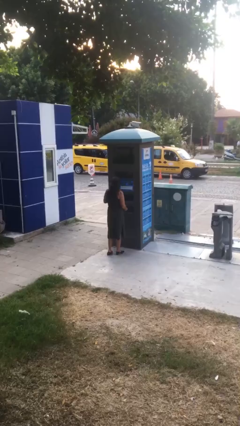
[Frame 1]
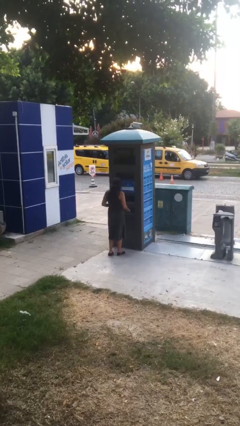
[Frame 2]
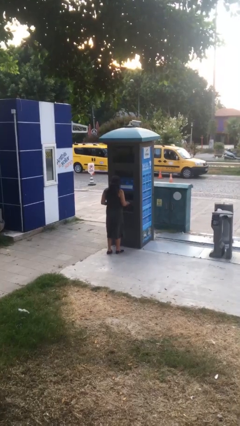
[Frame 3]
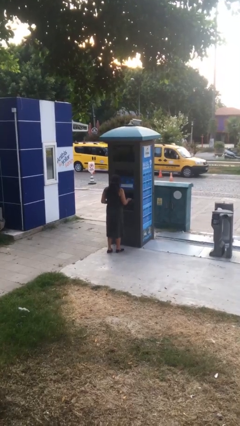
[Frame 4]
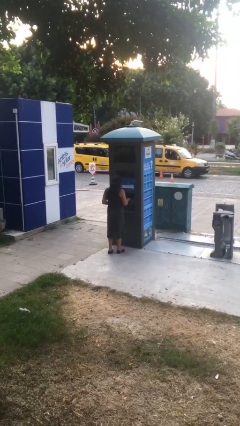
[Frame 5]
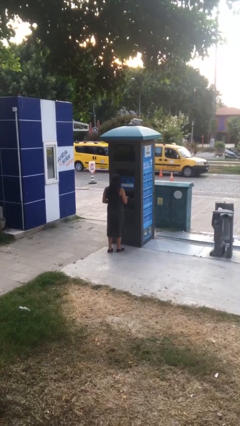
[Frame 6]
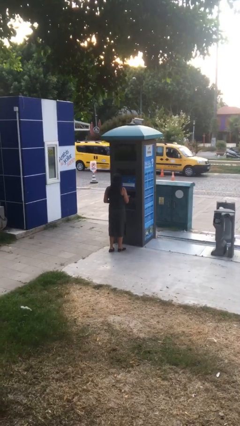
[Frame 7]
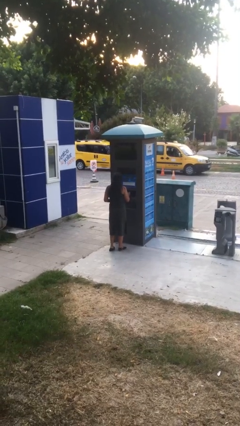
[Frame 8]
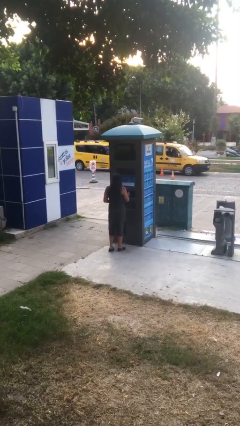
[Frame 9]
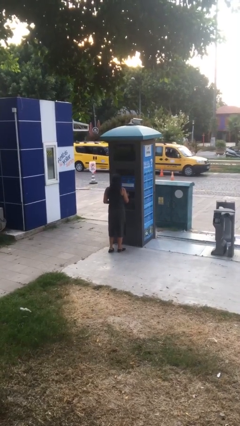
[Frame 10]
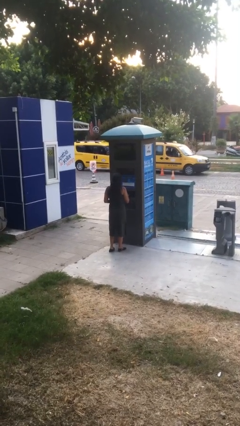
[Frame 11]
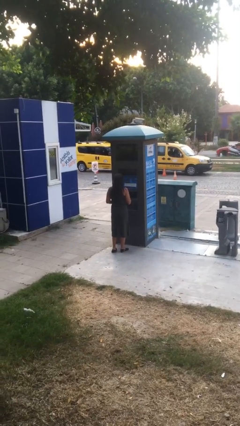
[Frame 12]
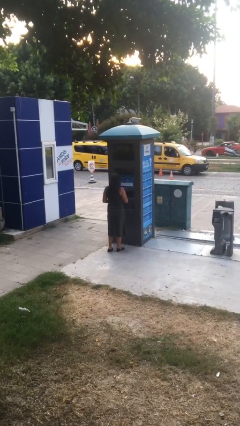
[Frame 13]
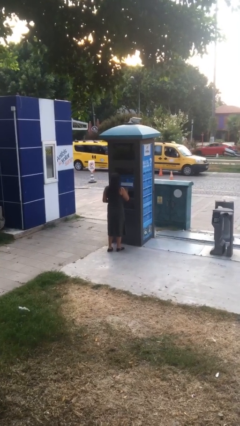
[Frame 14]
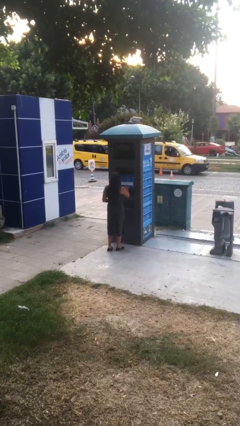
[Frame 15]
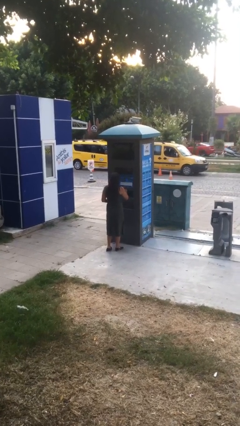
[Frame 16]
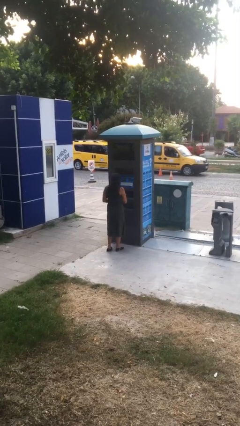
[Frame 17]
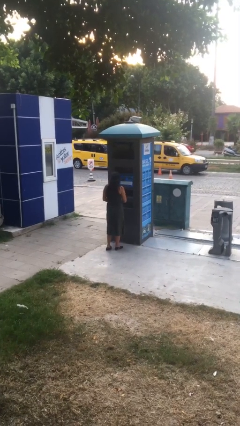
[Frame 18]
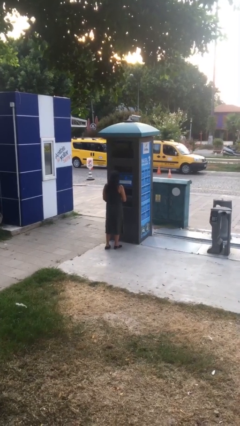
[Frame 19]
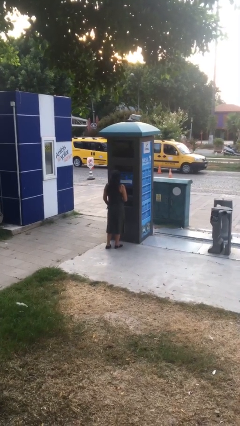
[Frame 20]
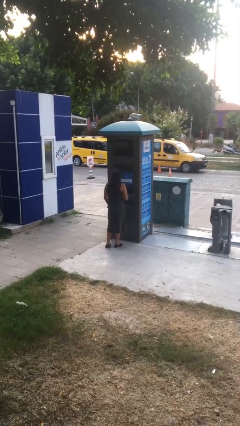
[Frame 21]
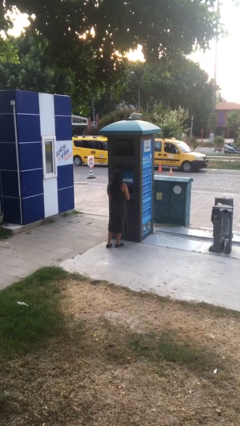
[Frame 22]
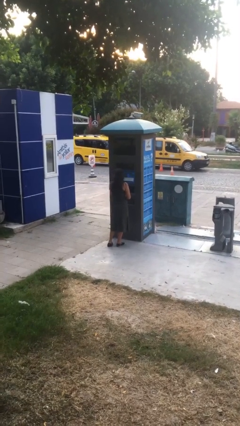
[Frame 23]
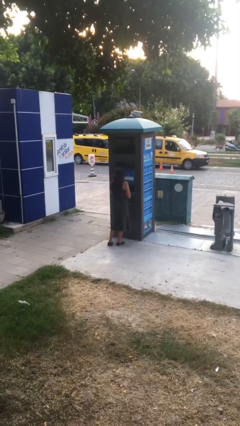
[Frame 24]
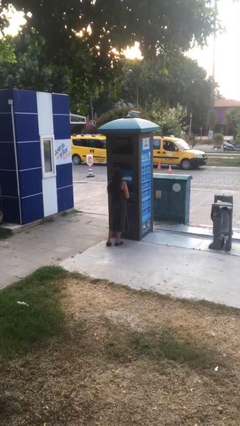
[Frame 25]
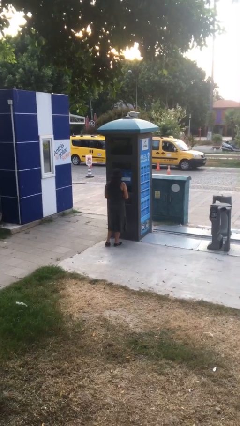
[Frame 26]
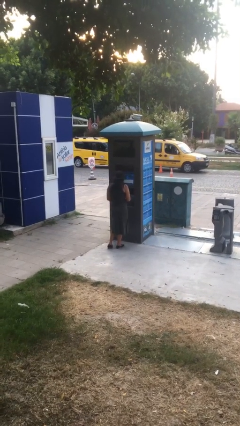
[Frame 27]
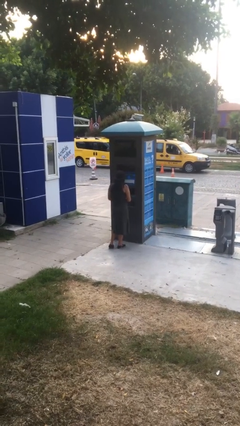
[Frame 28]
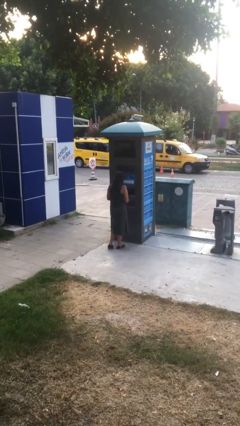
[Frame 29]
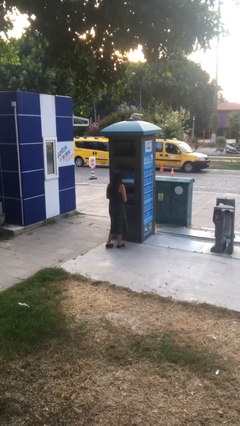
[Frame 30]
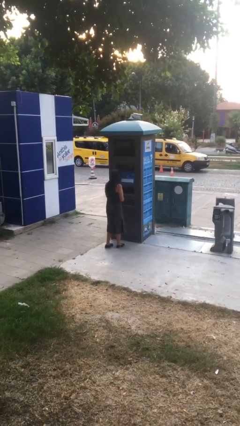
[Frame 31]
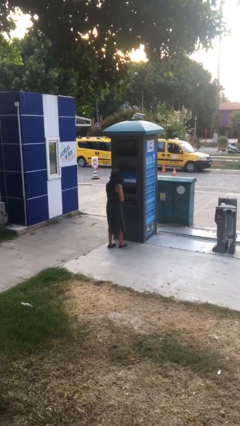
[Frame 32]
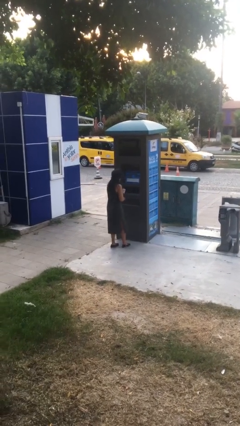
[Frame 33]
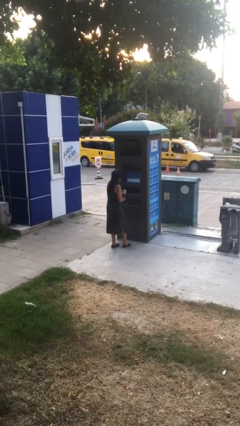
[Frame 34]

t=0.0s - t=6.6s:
person purchases from machine

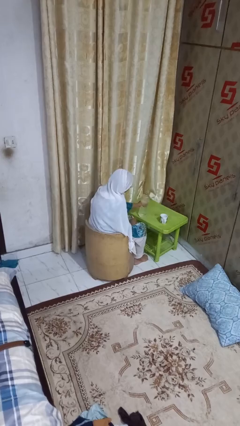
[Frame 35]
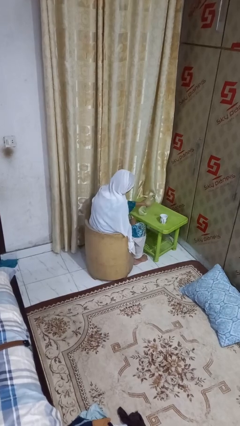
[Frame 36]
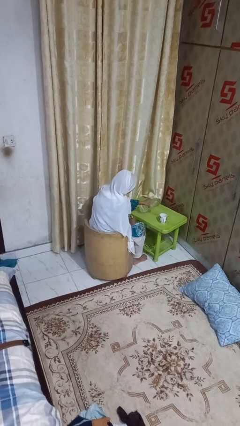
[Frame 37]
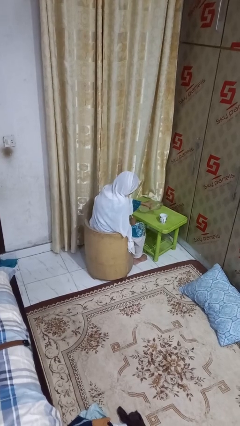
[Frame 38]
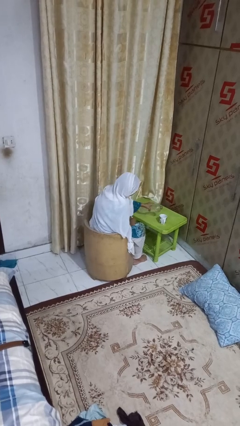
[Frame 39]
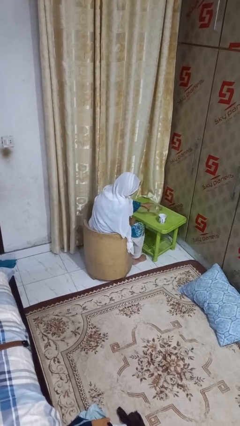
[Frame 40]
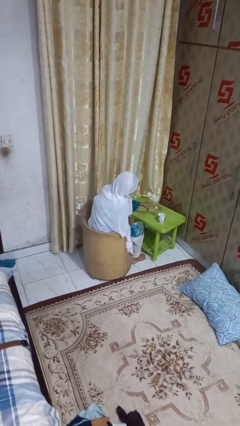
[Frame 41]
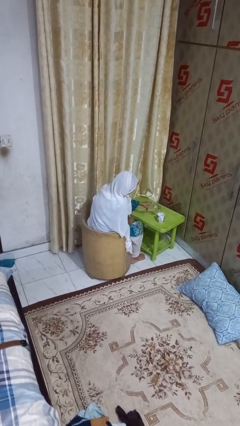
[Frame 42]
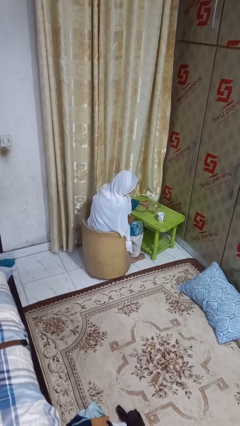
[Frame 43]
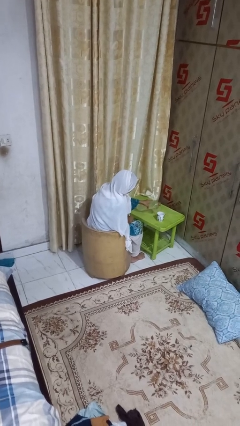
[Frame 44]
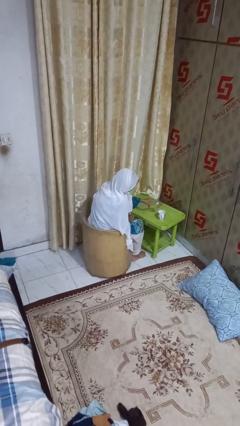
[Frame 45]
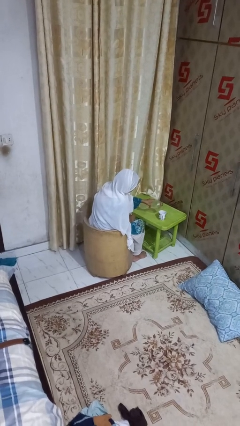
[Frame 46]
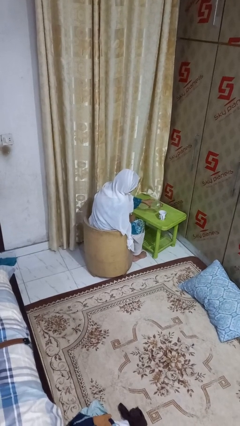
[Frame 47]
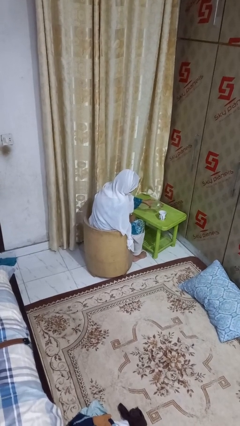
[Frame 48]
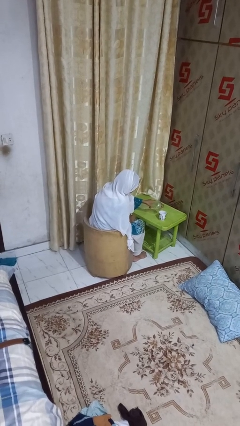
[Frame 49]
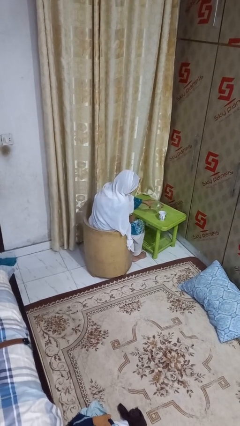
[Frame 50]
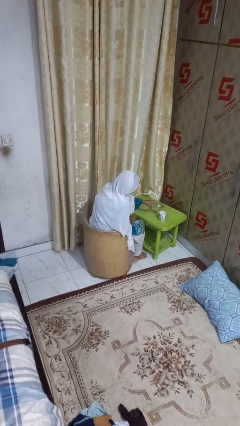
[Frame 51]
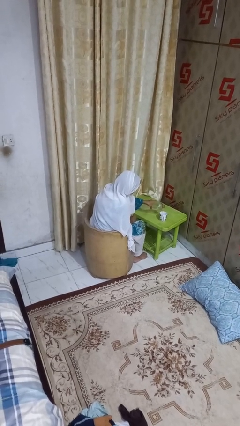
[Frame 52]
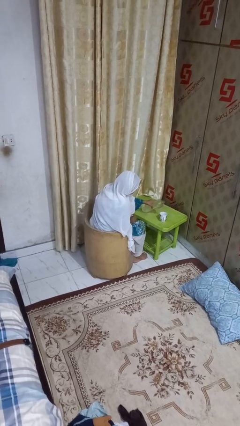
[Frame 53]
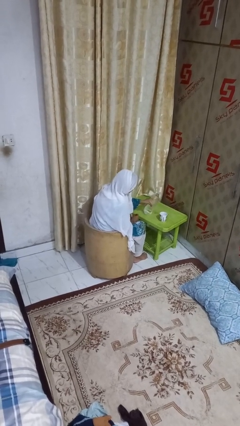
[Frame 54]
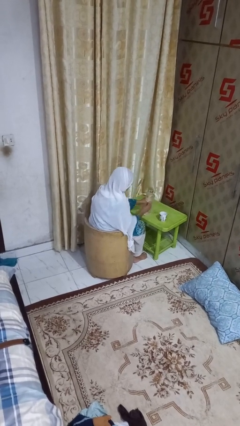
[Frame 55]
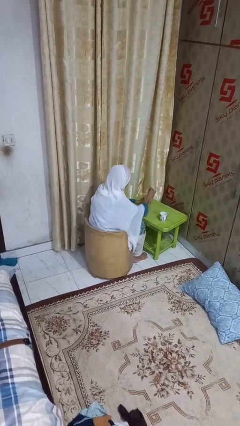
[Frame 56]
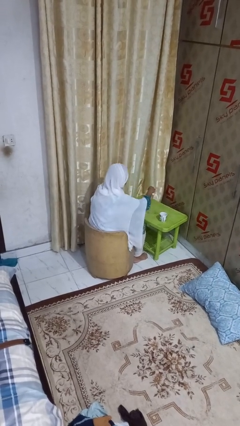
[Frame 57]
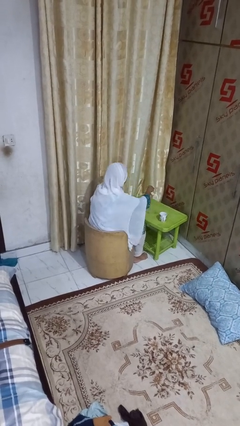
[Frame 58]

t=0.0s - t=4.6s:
person pours liquid into cup

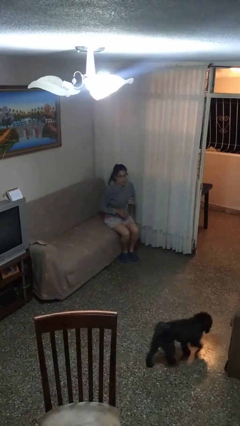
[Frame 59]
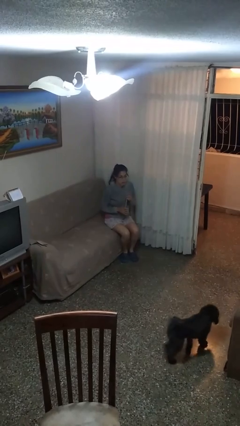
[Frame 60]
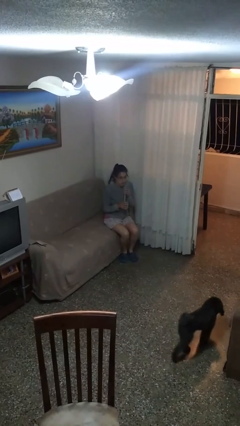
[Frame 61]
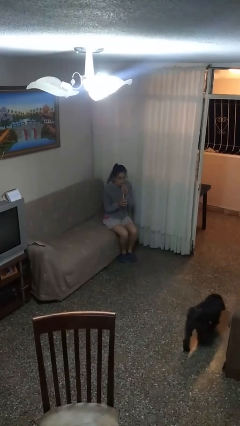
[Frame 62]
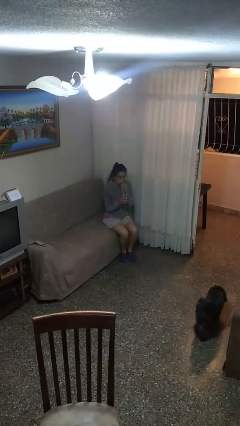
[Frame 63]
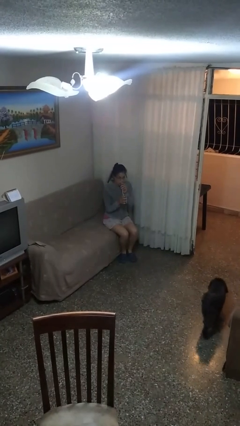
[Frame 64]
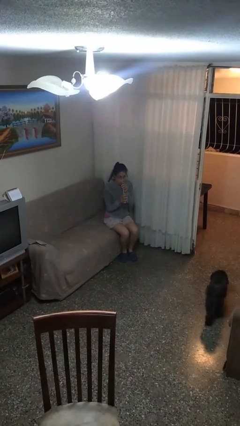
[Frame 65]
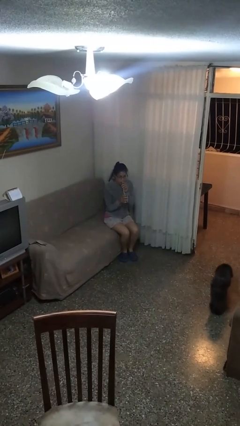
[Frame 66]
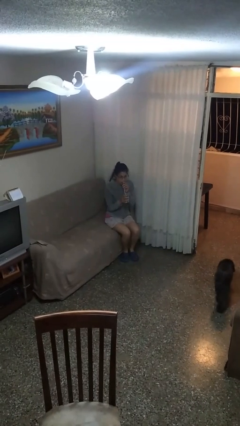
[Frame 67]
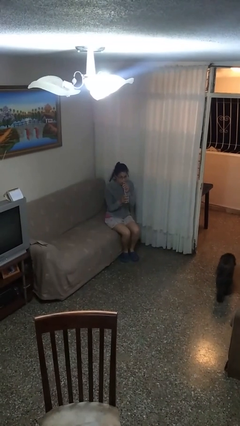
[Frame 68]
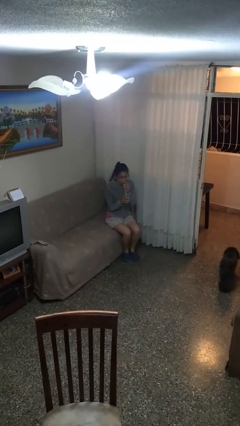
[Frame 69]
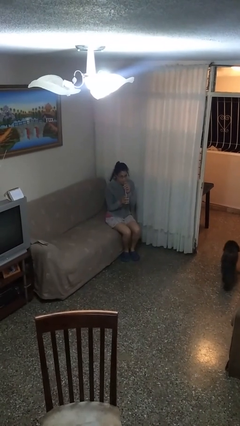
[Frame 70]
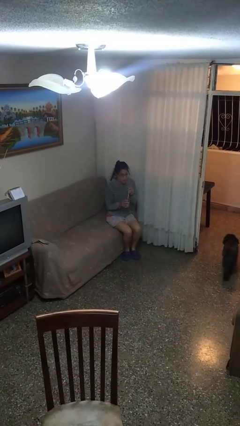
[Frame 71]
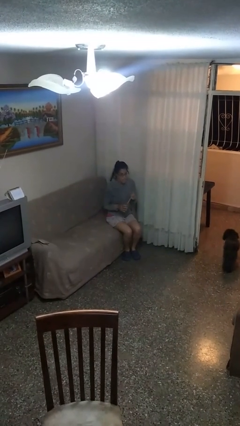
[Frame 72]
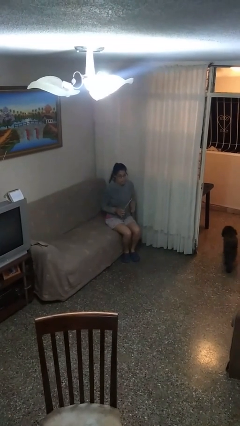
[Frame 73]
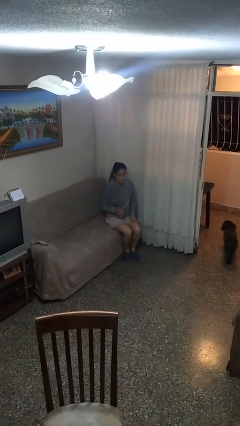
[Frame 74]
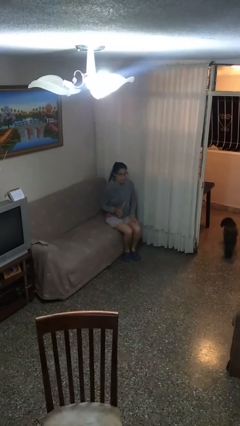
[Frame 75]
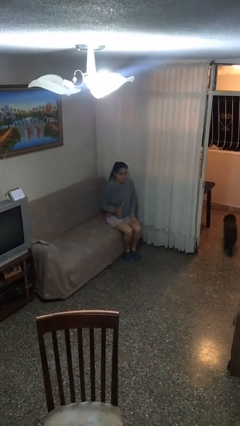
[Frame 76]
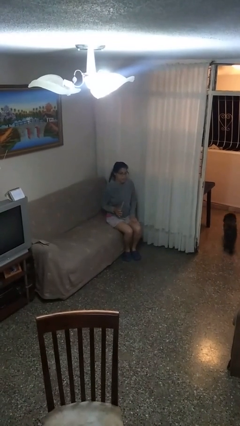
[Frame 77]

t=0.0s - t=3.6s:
person drinks from straw

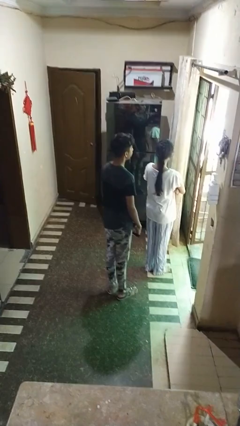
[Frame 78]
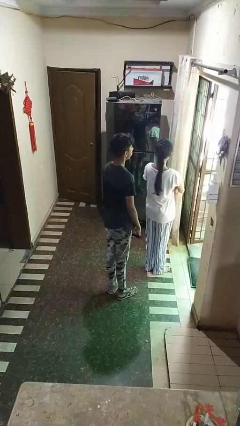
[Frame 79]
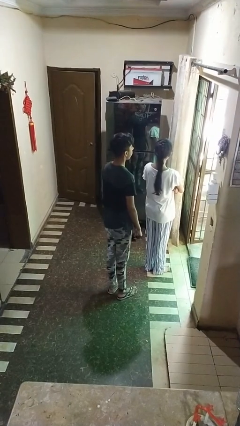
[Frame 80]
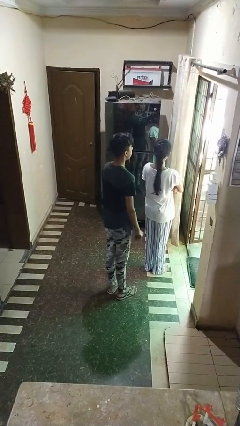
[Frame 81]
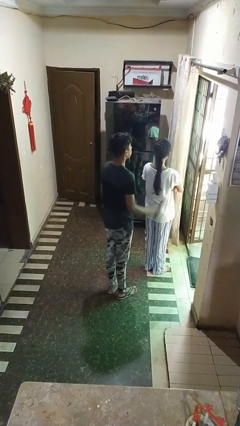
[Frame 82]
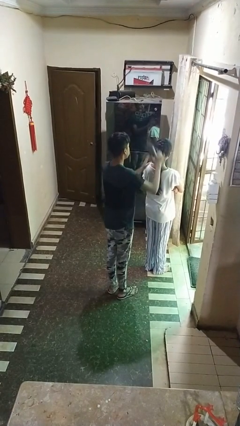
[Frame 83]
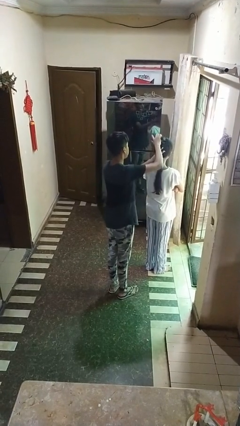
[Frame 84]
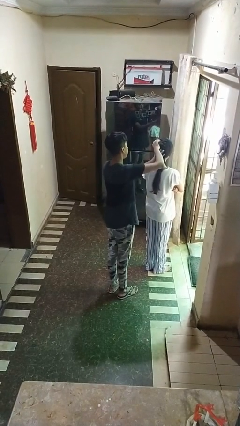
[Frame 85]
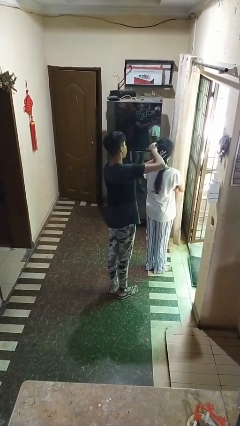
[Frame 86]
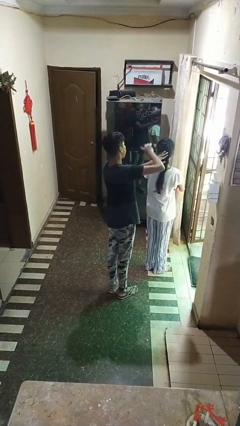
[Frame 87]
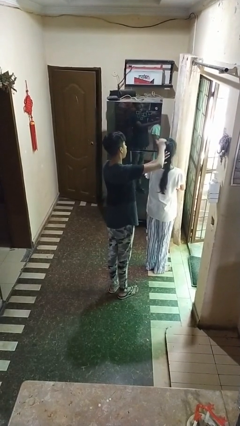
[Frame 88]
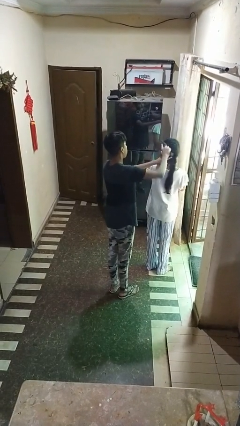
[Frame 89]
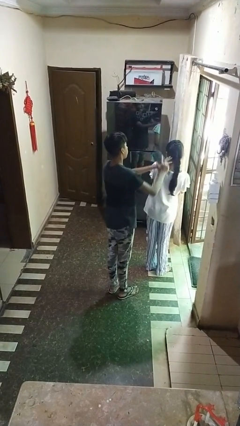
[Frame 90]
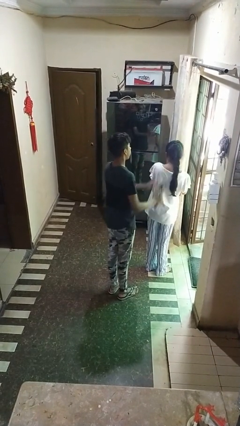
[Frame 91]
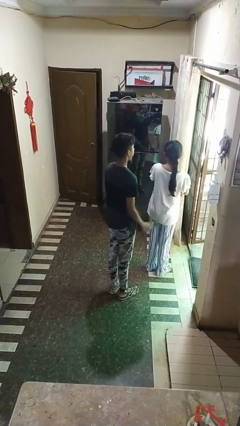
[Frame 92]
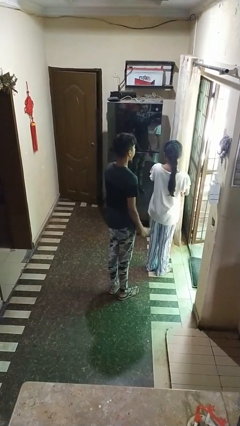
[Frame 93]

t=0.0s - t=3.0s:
person brushes hair of person
